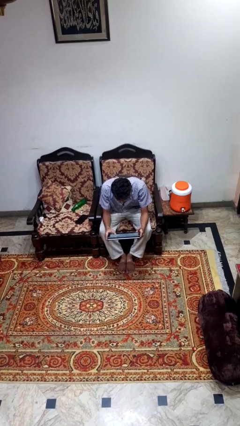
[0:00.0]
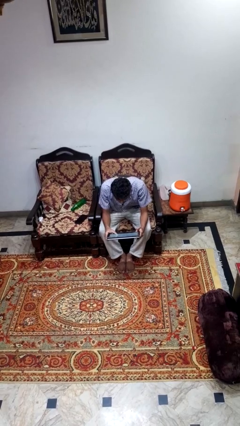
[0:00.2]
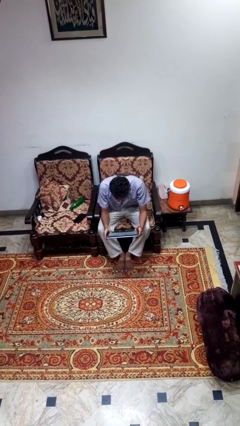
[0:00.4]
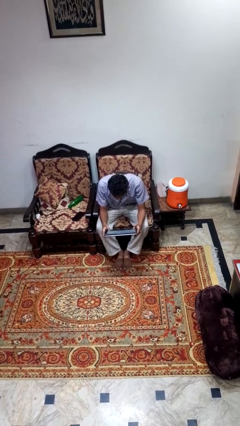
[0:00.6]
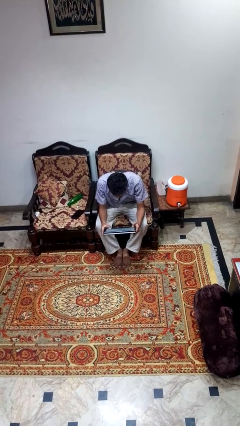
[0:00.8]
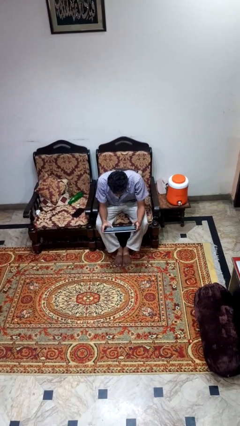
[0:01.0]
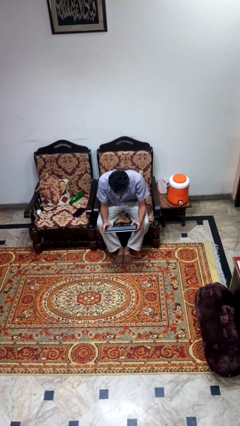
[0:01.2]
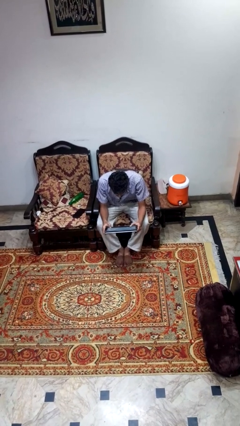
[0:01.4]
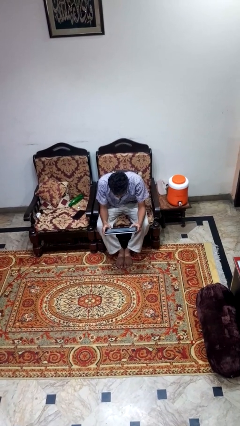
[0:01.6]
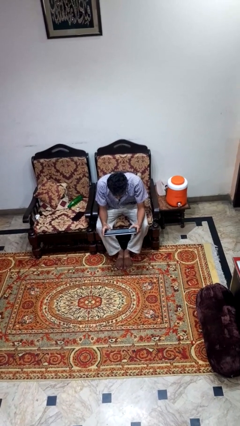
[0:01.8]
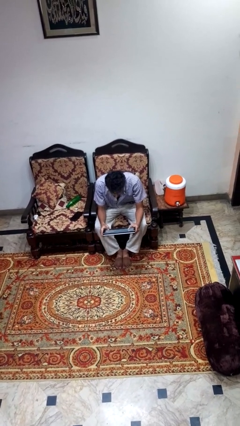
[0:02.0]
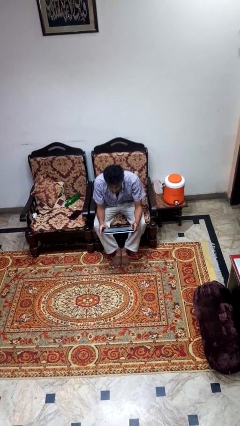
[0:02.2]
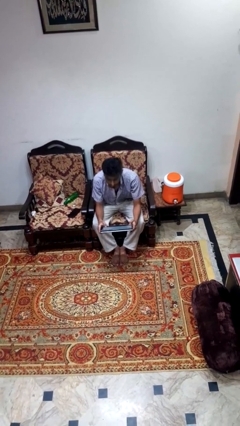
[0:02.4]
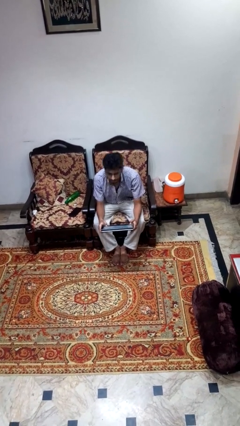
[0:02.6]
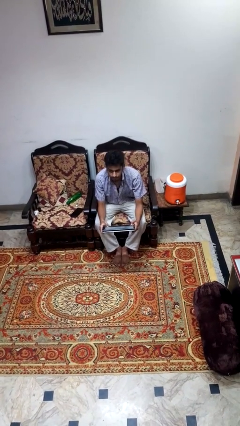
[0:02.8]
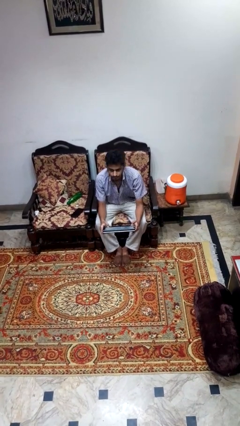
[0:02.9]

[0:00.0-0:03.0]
person reads newspaper

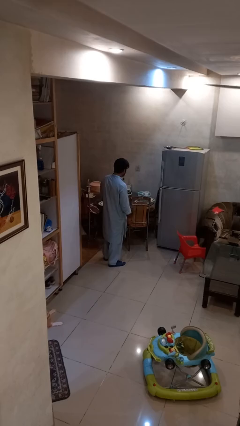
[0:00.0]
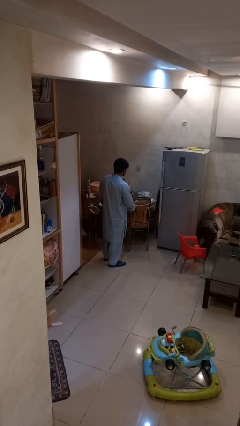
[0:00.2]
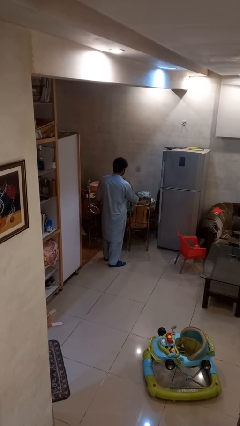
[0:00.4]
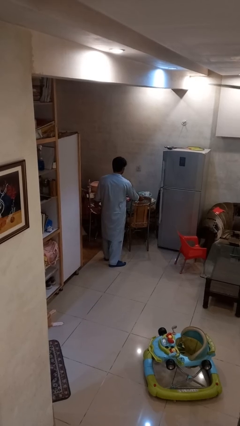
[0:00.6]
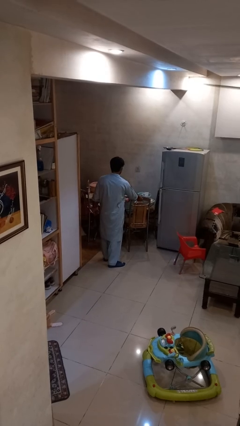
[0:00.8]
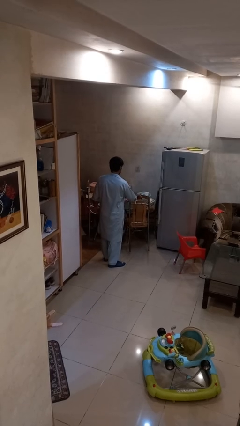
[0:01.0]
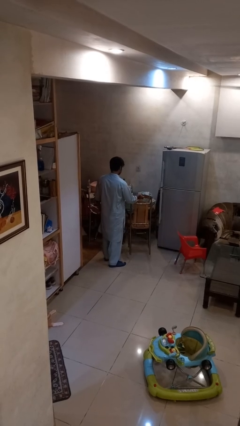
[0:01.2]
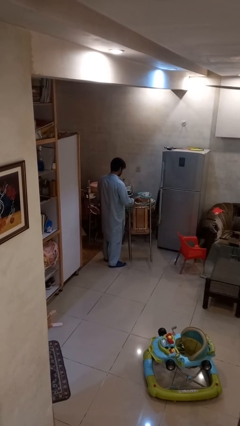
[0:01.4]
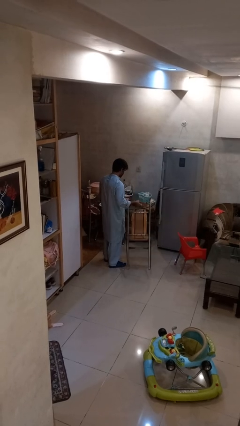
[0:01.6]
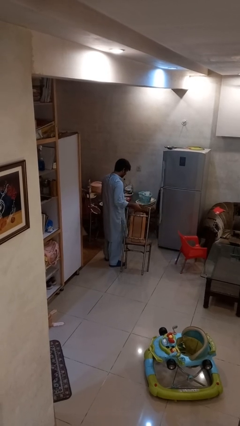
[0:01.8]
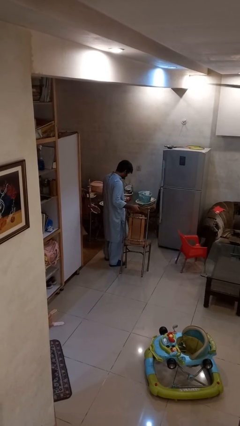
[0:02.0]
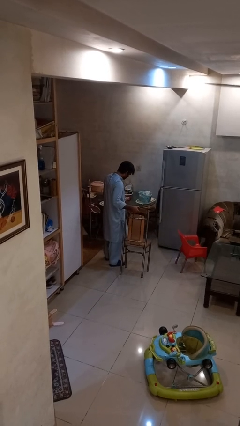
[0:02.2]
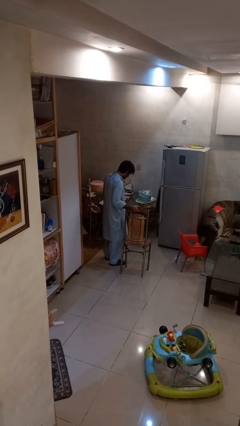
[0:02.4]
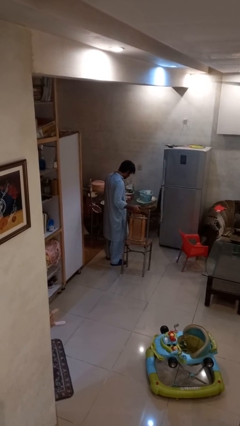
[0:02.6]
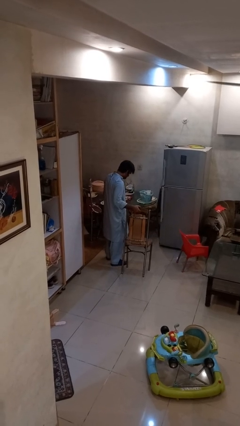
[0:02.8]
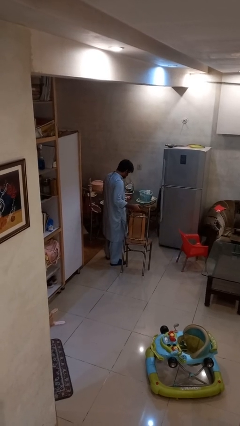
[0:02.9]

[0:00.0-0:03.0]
person pulls out chair

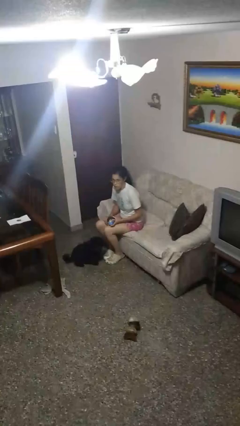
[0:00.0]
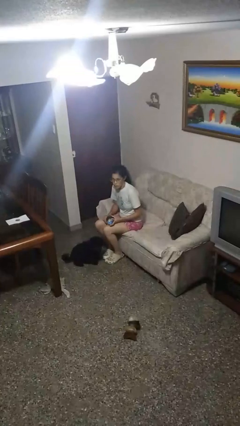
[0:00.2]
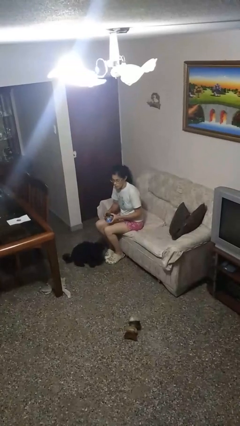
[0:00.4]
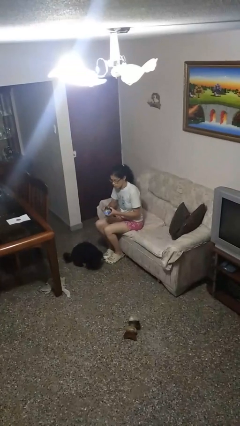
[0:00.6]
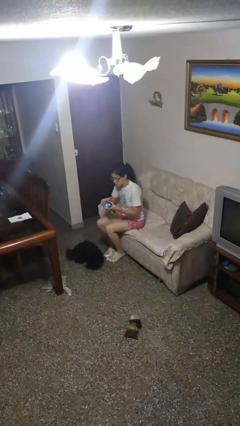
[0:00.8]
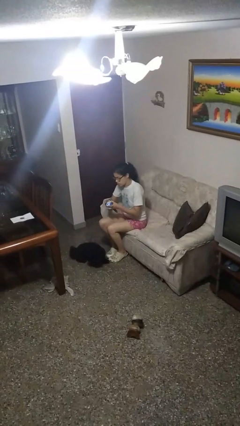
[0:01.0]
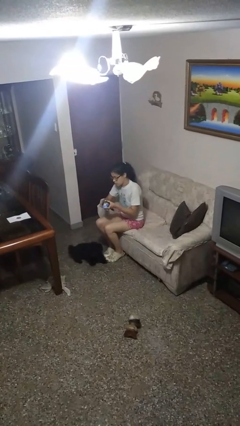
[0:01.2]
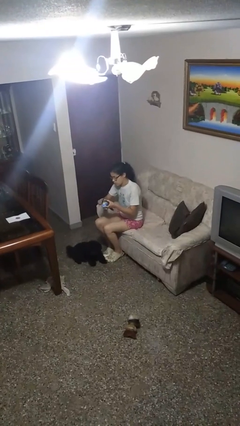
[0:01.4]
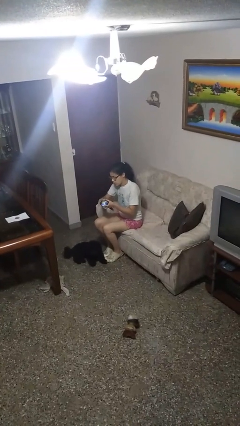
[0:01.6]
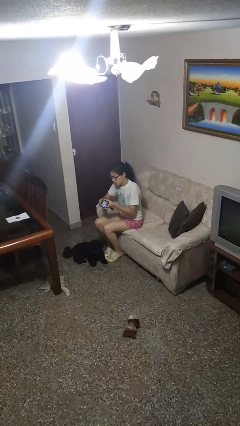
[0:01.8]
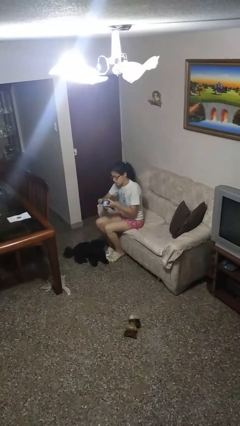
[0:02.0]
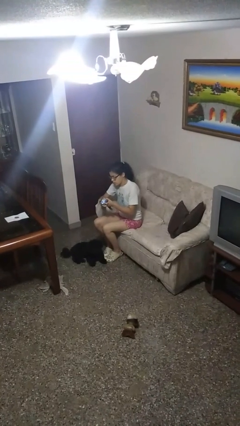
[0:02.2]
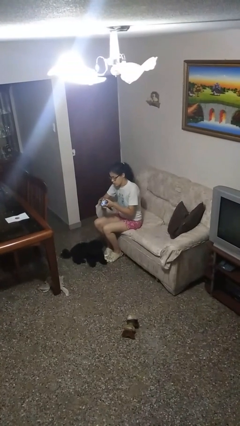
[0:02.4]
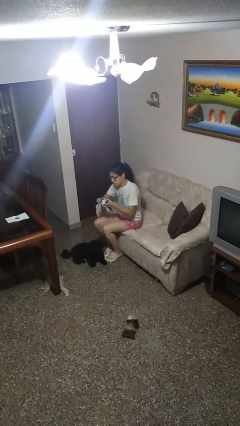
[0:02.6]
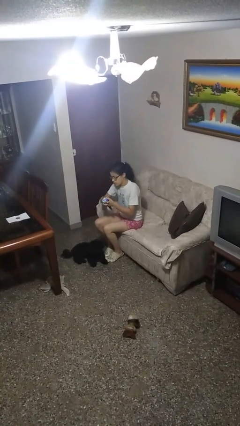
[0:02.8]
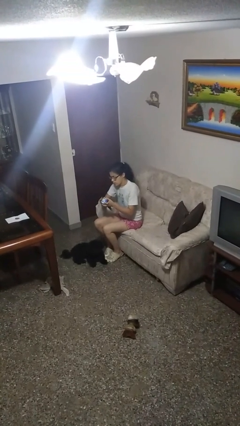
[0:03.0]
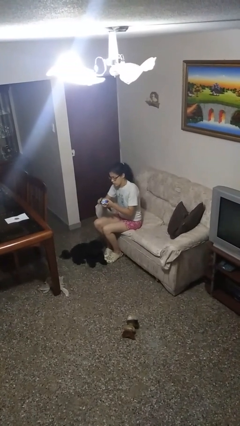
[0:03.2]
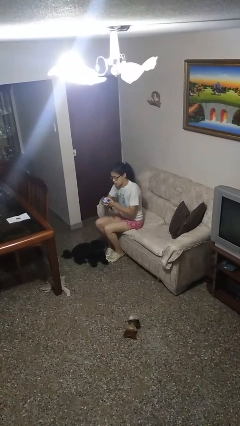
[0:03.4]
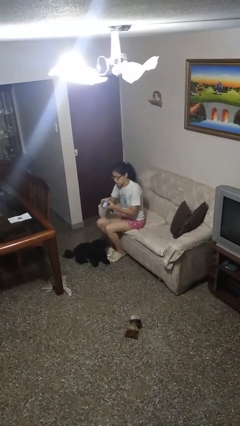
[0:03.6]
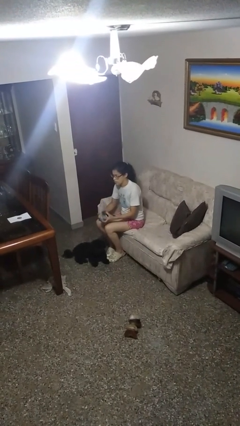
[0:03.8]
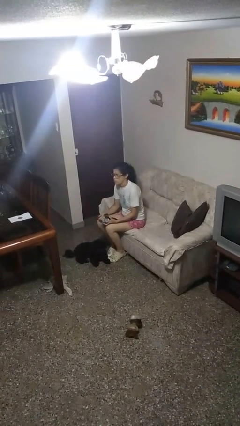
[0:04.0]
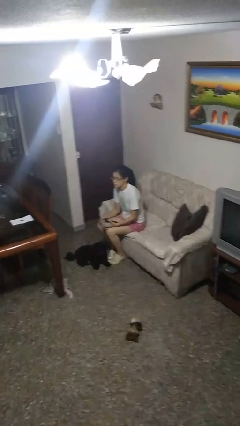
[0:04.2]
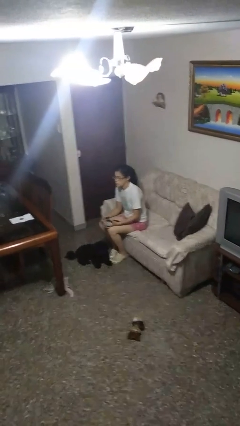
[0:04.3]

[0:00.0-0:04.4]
person opens can with can opener

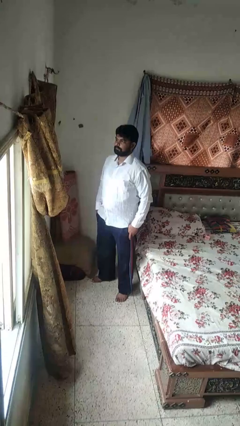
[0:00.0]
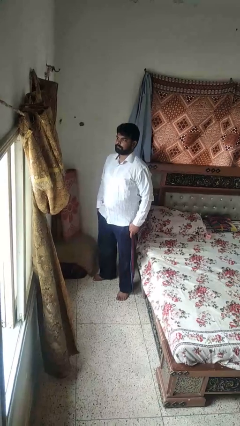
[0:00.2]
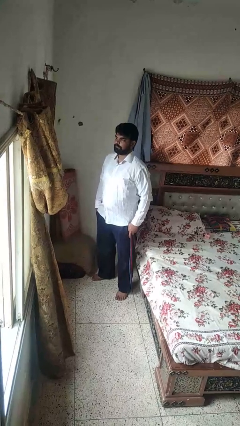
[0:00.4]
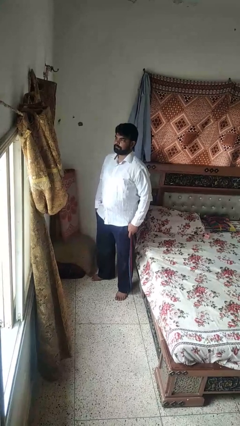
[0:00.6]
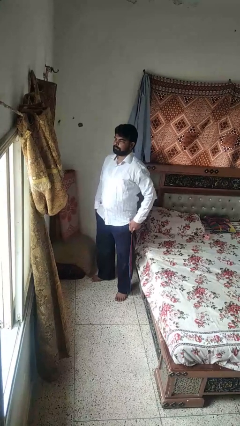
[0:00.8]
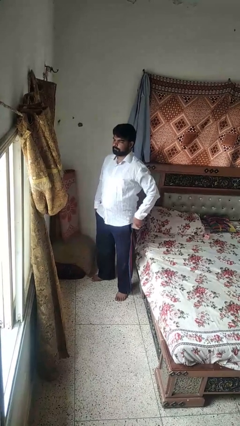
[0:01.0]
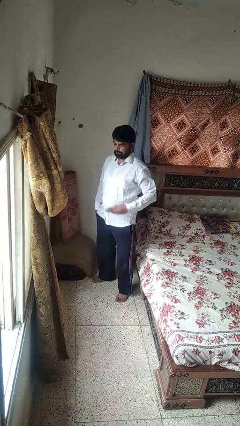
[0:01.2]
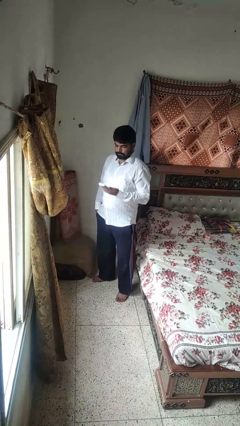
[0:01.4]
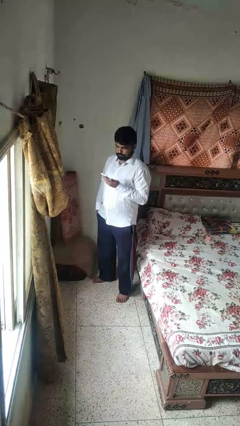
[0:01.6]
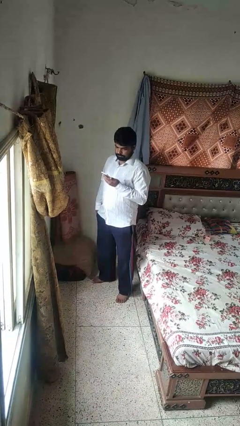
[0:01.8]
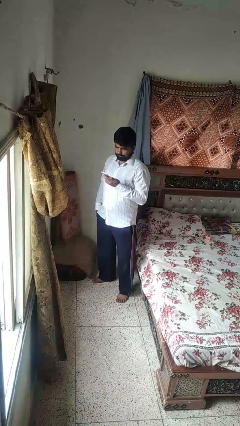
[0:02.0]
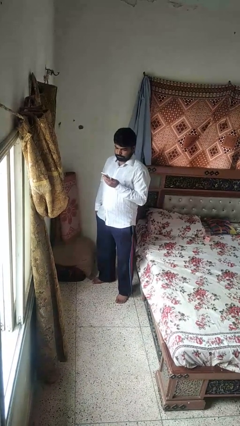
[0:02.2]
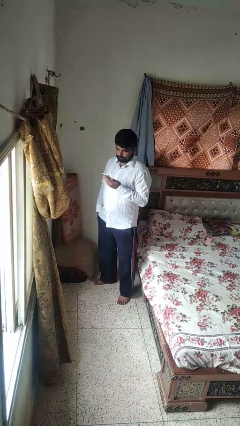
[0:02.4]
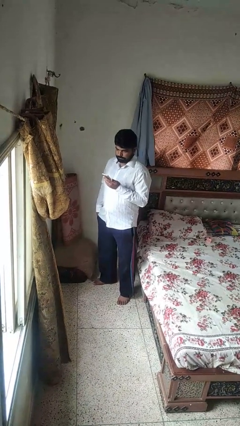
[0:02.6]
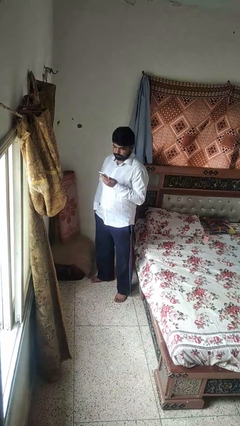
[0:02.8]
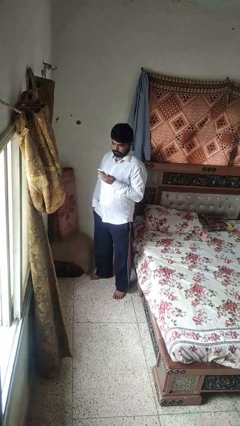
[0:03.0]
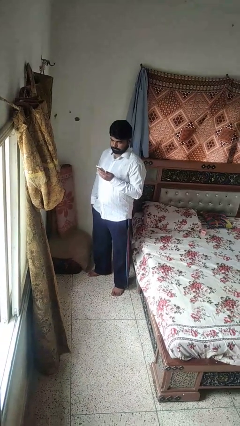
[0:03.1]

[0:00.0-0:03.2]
person takes phone from pocket

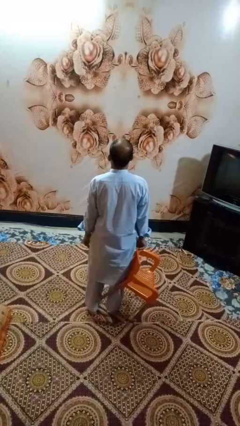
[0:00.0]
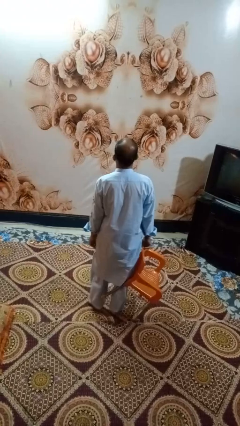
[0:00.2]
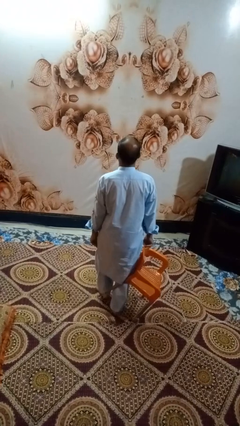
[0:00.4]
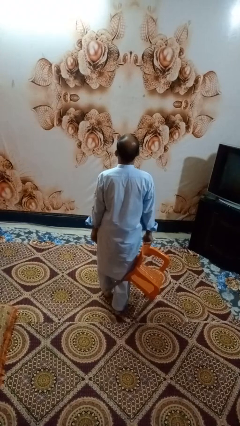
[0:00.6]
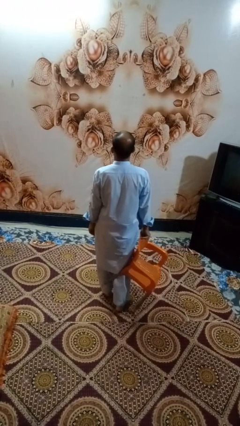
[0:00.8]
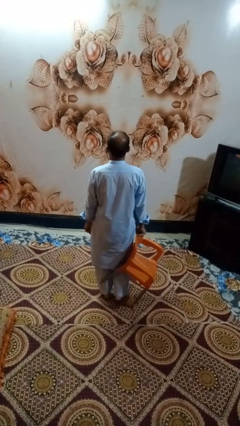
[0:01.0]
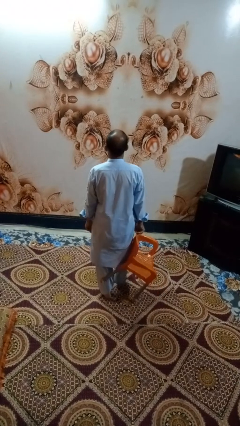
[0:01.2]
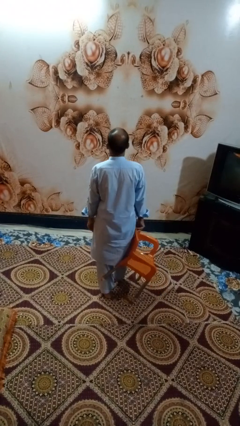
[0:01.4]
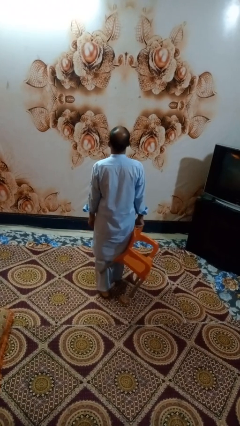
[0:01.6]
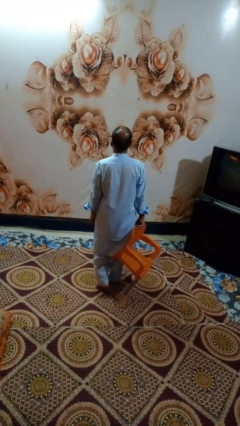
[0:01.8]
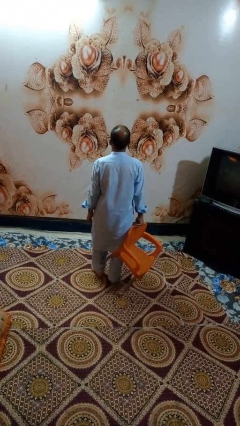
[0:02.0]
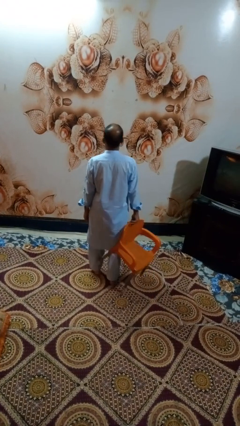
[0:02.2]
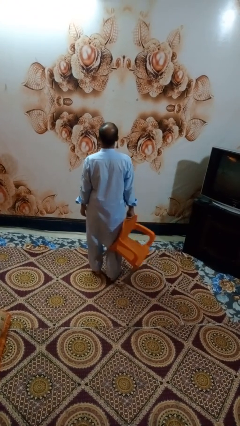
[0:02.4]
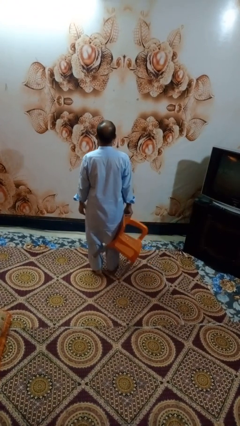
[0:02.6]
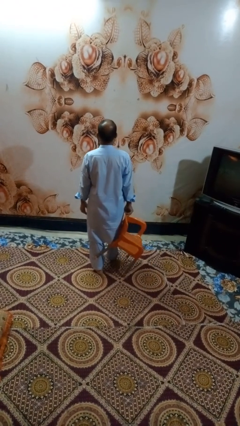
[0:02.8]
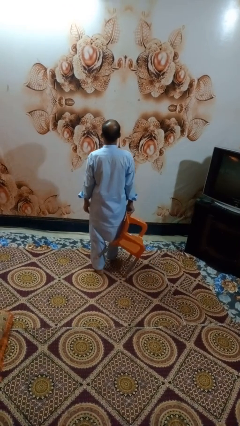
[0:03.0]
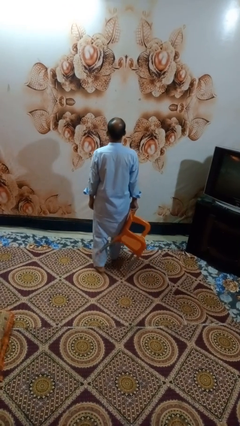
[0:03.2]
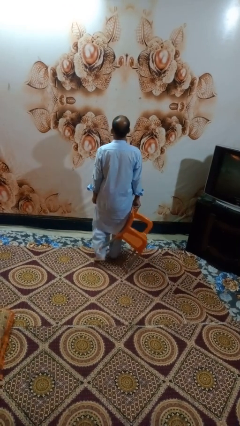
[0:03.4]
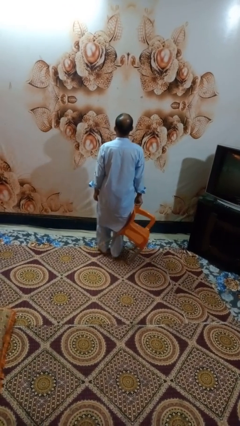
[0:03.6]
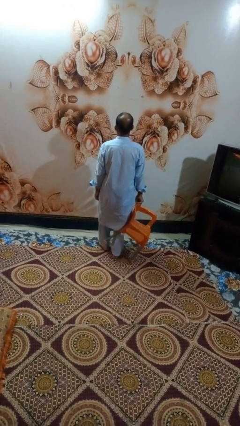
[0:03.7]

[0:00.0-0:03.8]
person carries furniture

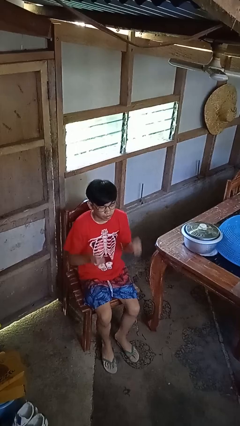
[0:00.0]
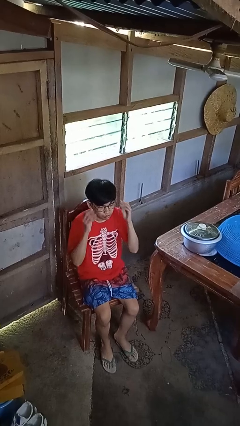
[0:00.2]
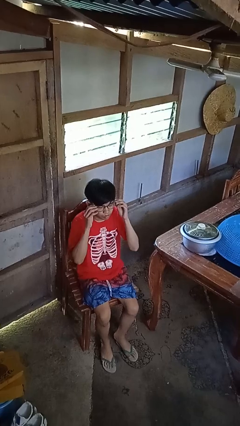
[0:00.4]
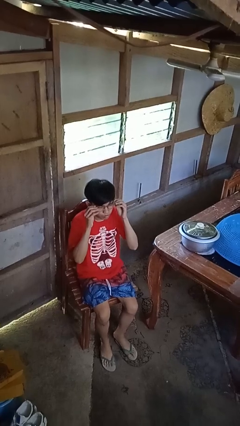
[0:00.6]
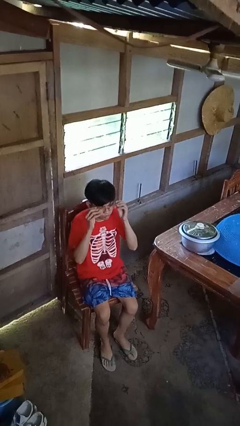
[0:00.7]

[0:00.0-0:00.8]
person takes off glasses
